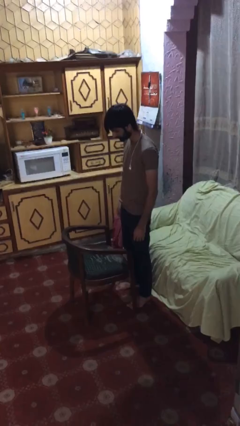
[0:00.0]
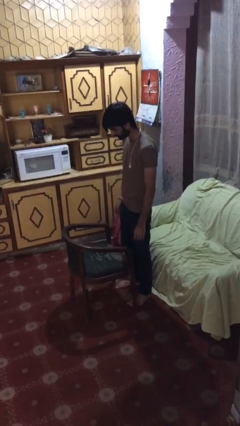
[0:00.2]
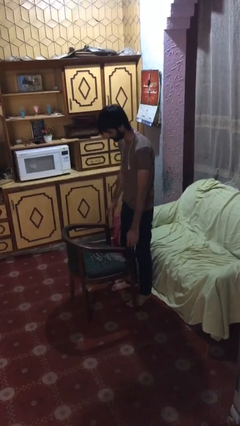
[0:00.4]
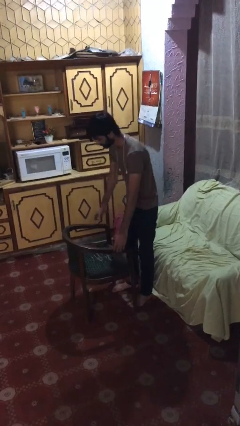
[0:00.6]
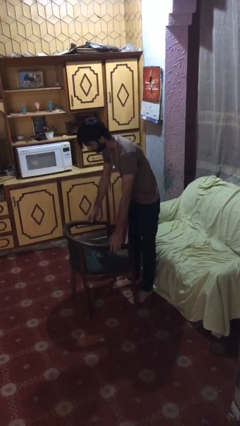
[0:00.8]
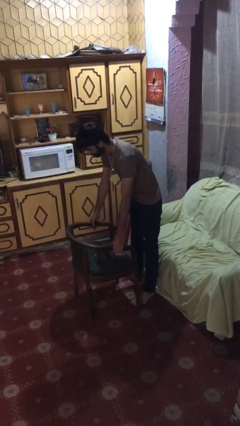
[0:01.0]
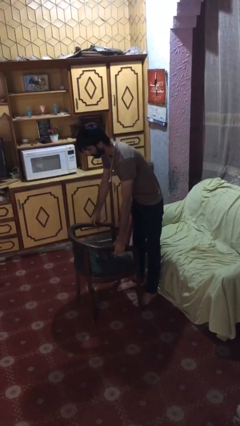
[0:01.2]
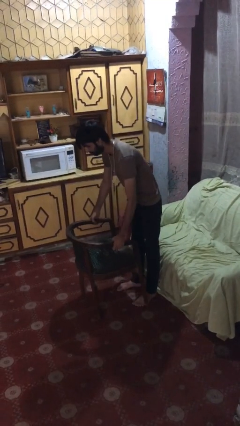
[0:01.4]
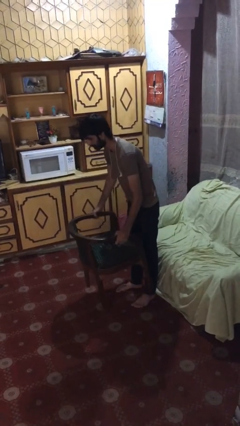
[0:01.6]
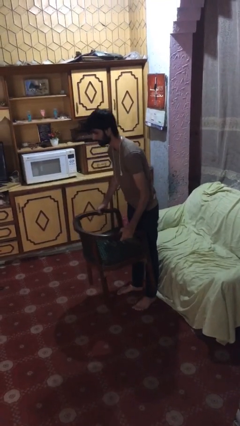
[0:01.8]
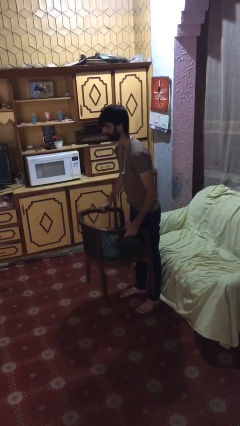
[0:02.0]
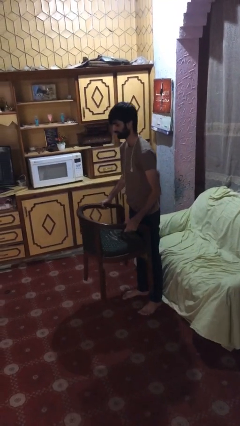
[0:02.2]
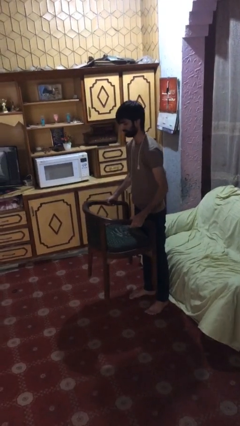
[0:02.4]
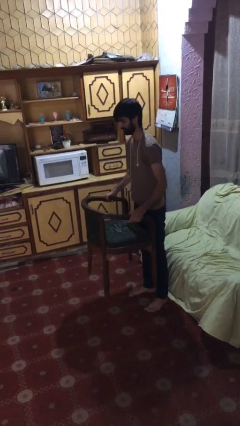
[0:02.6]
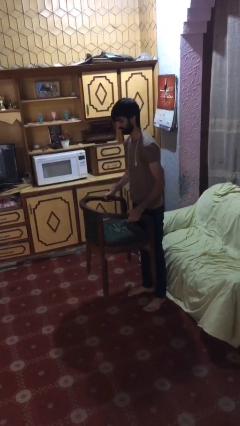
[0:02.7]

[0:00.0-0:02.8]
person picks up object from floor

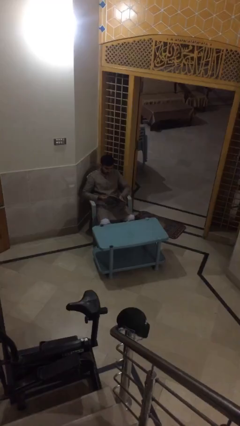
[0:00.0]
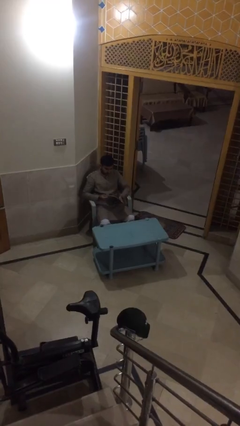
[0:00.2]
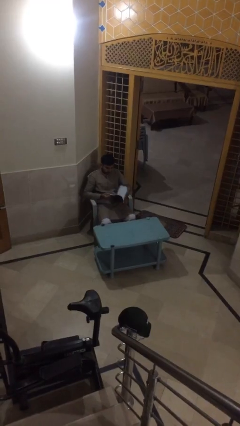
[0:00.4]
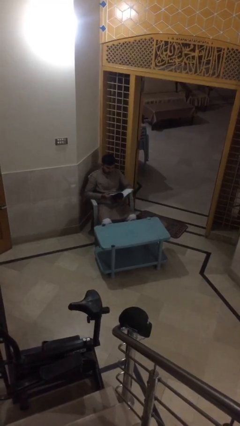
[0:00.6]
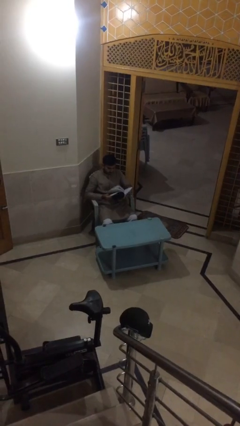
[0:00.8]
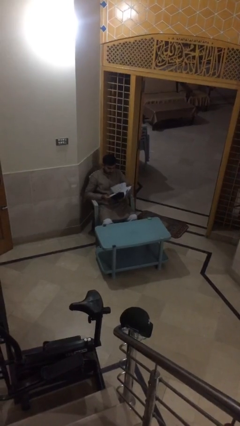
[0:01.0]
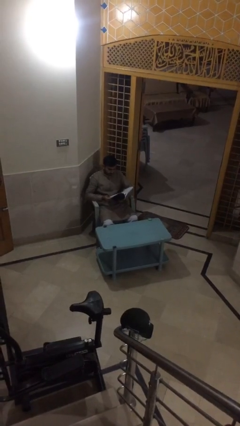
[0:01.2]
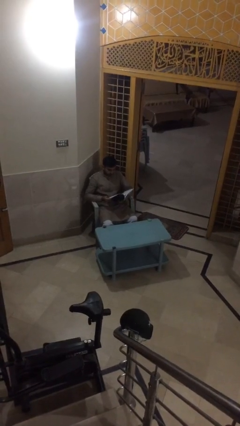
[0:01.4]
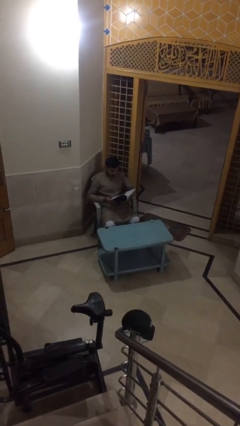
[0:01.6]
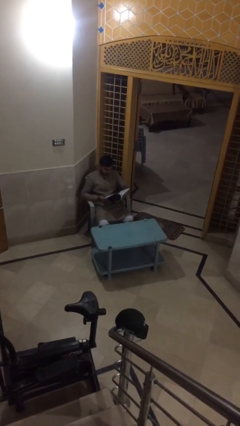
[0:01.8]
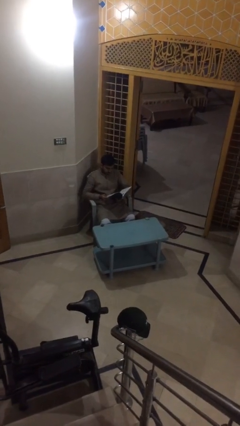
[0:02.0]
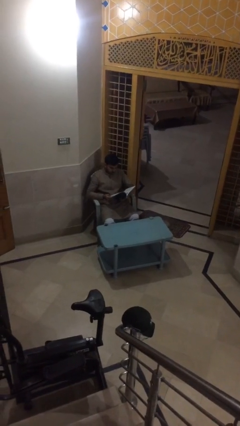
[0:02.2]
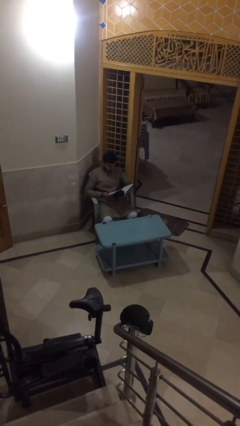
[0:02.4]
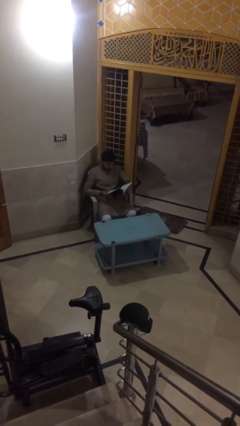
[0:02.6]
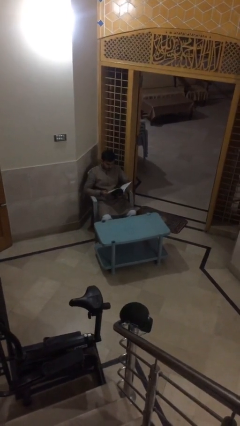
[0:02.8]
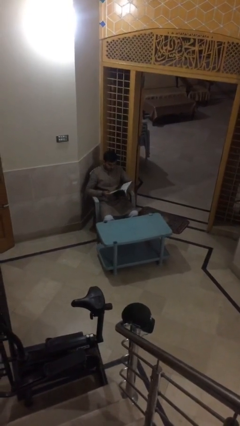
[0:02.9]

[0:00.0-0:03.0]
person reads document

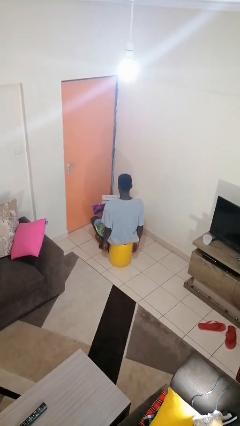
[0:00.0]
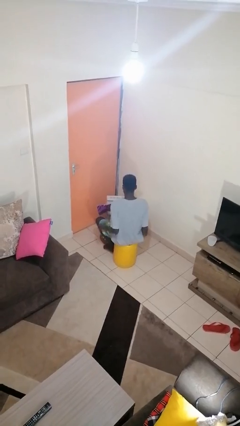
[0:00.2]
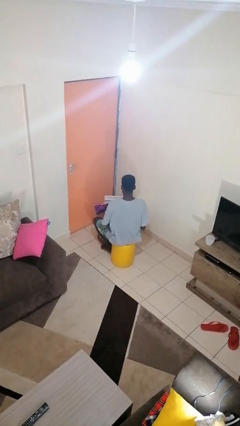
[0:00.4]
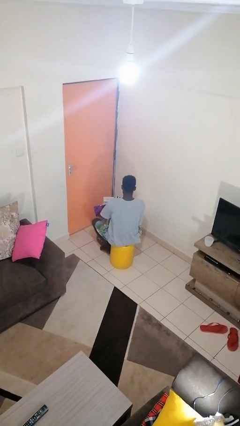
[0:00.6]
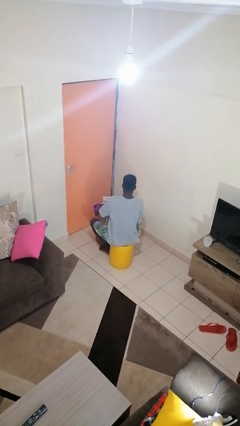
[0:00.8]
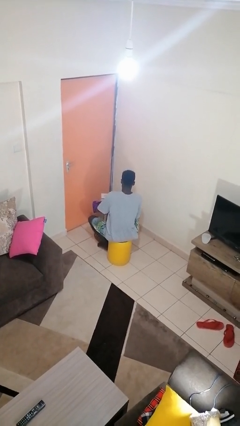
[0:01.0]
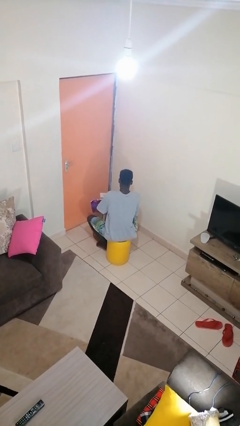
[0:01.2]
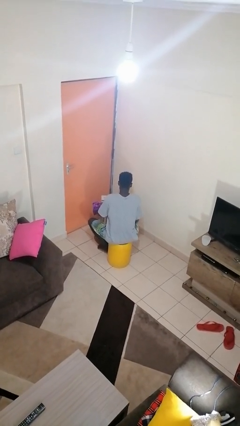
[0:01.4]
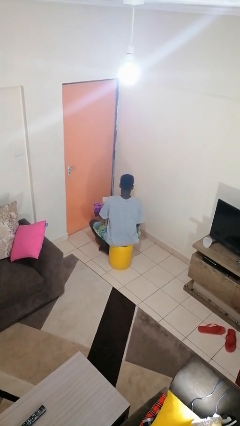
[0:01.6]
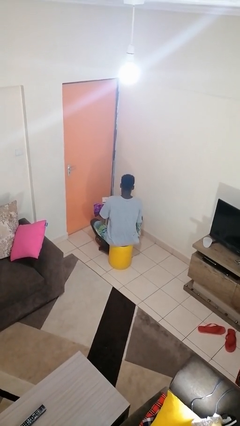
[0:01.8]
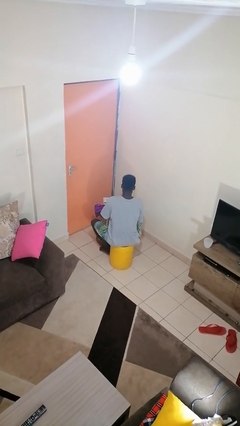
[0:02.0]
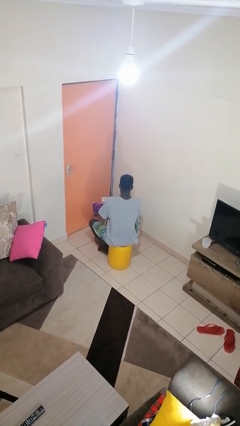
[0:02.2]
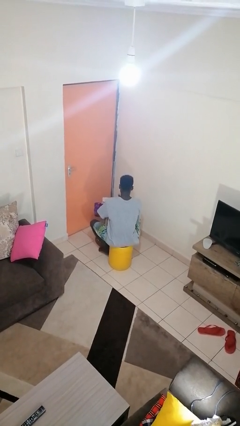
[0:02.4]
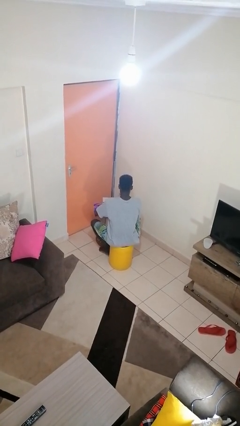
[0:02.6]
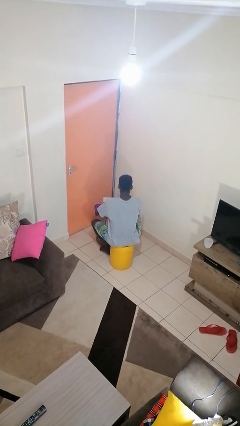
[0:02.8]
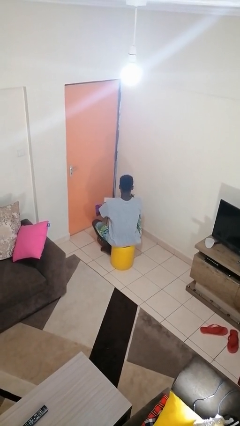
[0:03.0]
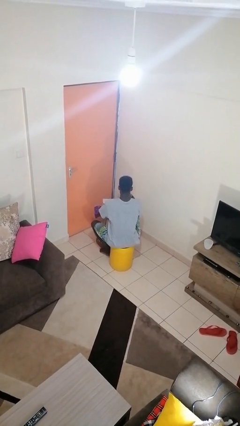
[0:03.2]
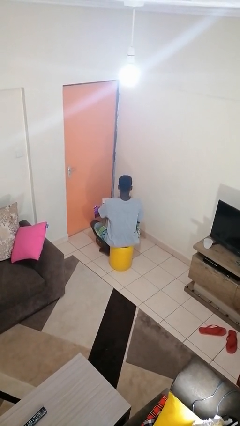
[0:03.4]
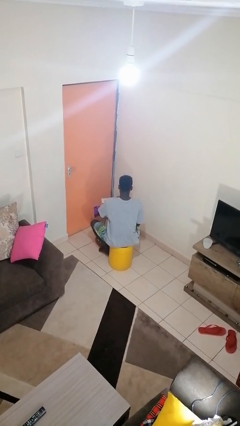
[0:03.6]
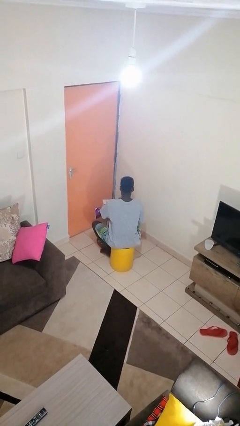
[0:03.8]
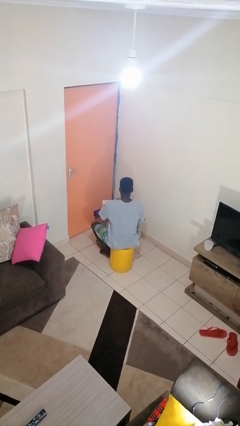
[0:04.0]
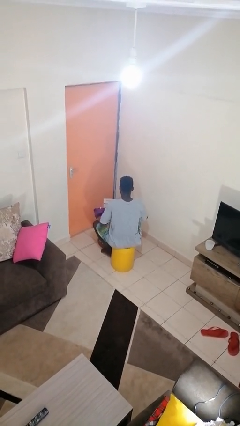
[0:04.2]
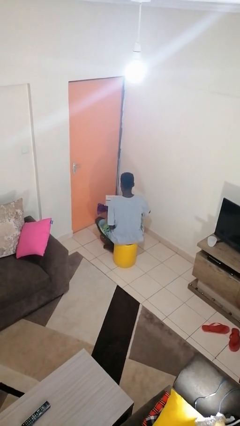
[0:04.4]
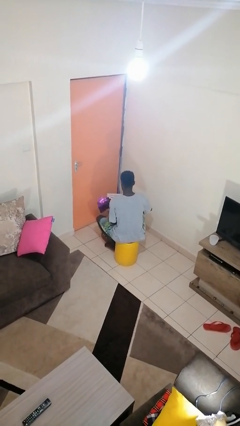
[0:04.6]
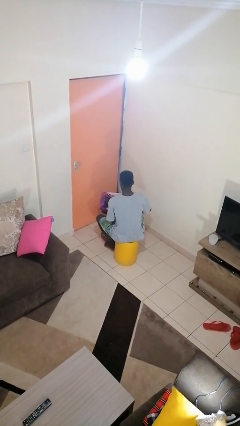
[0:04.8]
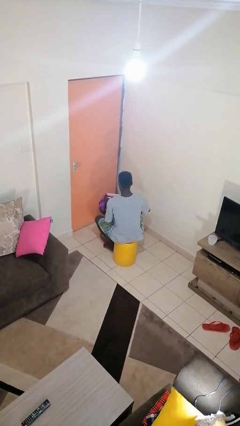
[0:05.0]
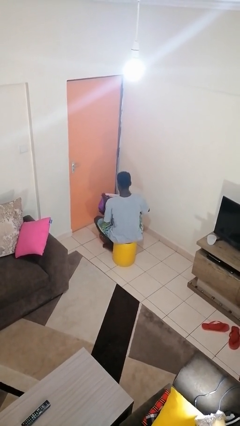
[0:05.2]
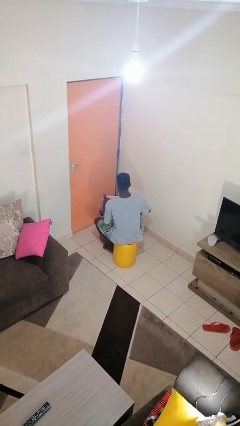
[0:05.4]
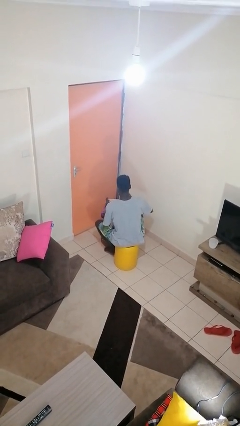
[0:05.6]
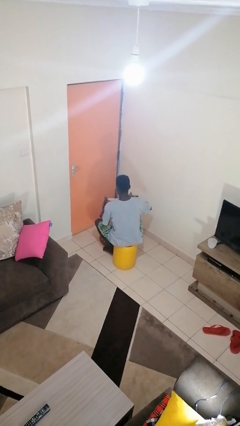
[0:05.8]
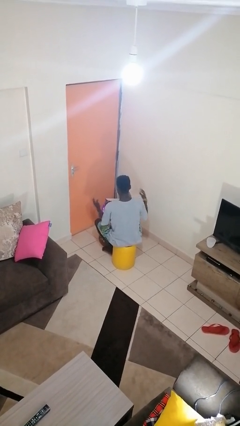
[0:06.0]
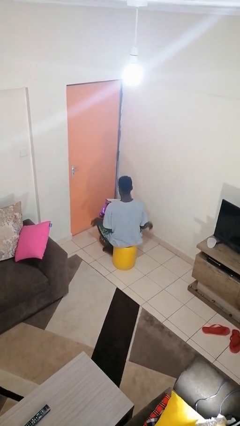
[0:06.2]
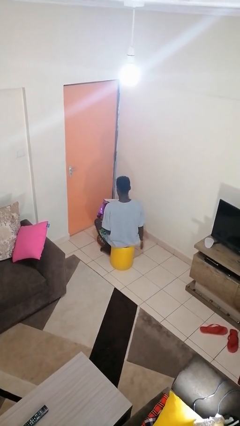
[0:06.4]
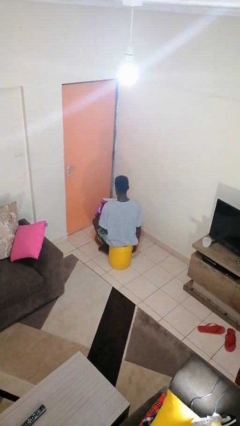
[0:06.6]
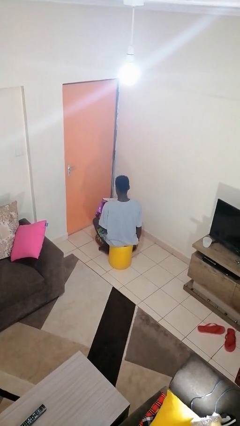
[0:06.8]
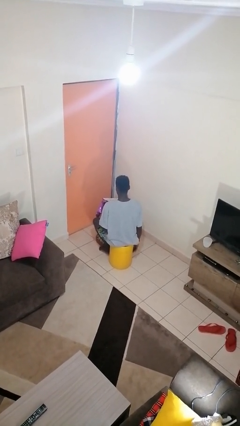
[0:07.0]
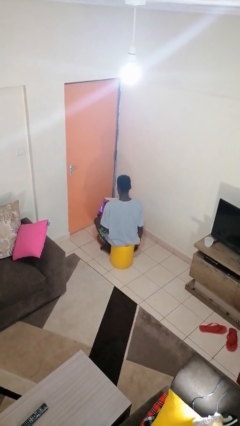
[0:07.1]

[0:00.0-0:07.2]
person wraps box

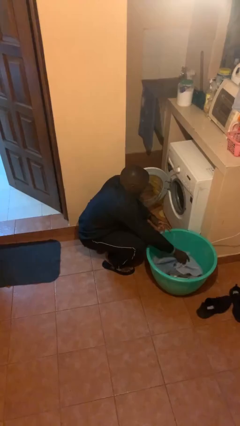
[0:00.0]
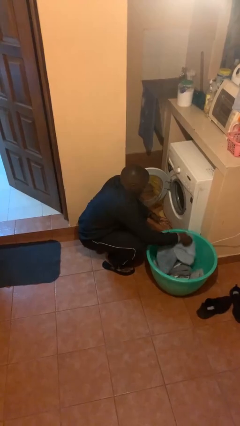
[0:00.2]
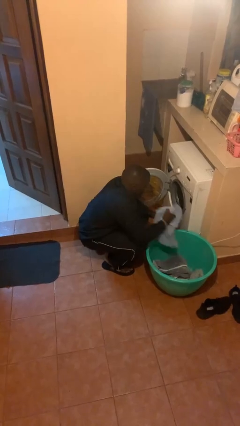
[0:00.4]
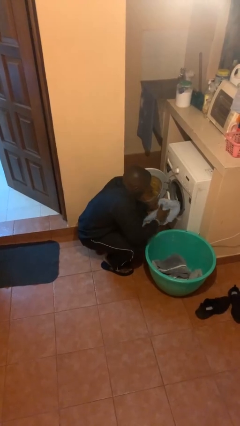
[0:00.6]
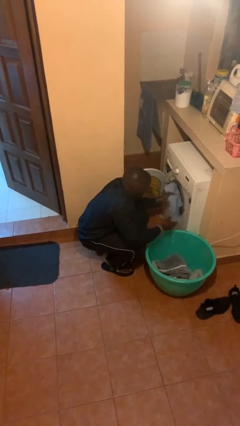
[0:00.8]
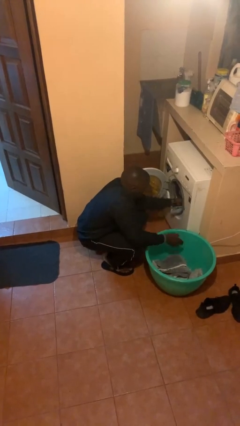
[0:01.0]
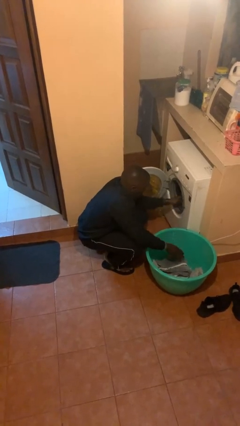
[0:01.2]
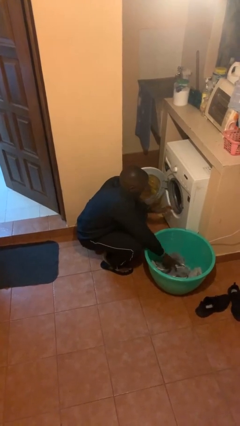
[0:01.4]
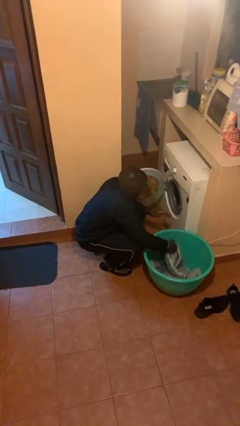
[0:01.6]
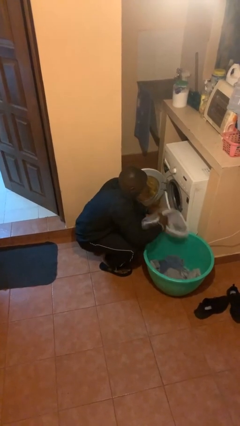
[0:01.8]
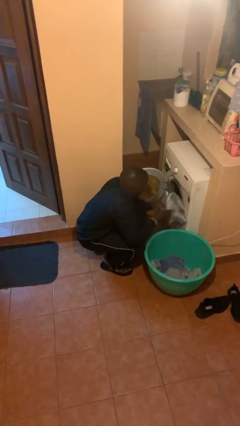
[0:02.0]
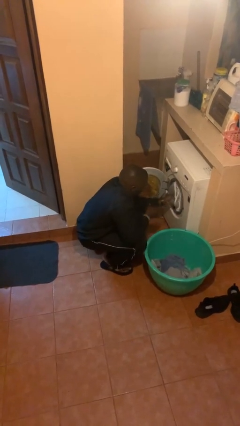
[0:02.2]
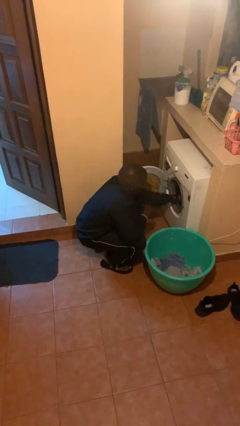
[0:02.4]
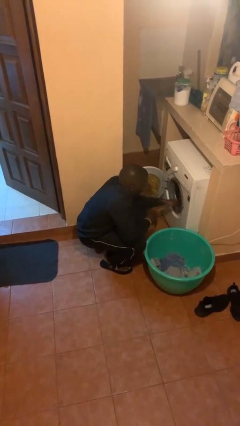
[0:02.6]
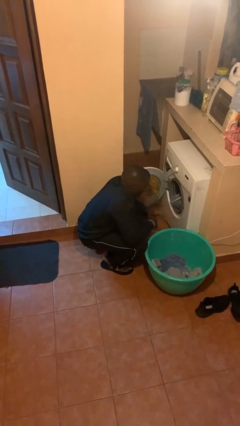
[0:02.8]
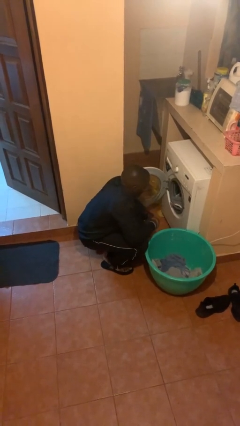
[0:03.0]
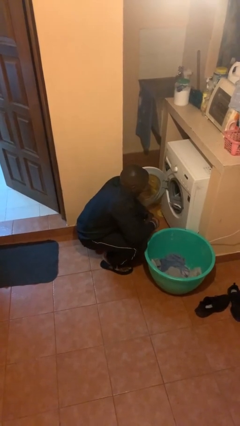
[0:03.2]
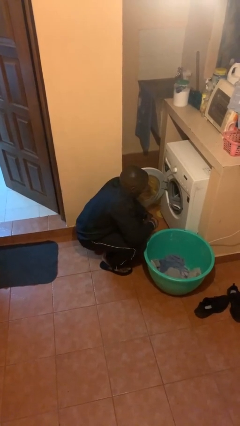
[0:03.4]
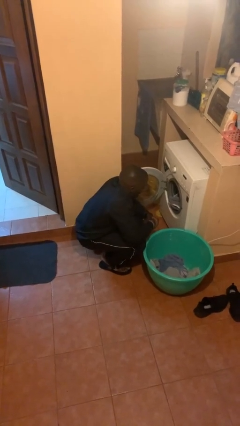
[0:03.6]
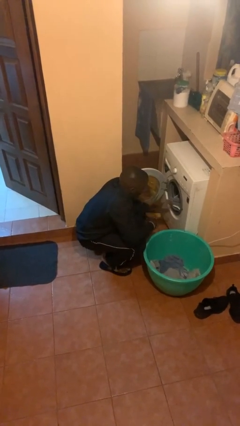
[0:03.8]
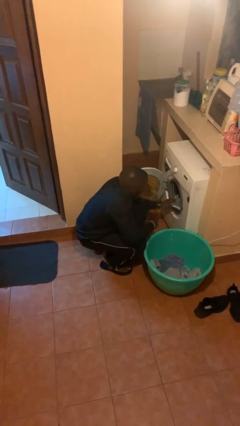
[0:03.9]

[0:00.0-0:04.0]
person loads clotheswasher

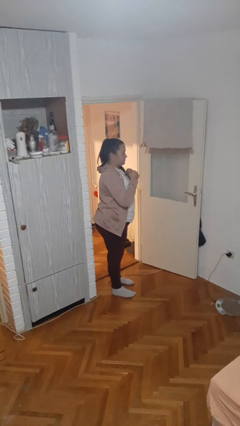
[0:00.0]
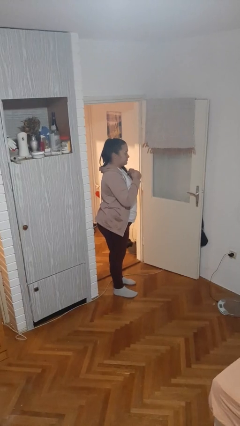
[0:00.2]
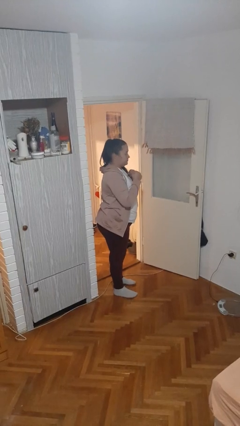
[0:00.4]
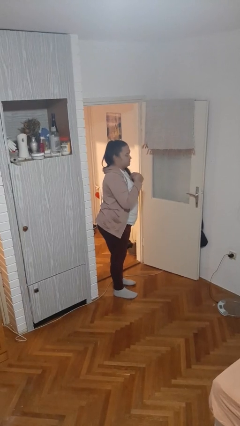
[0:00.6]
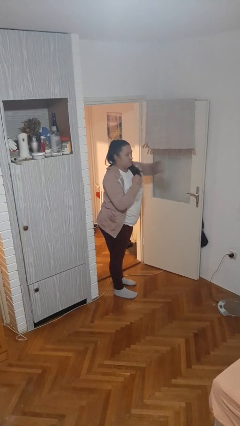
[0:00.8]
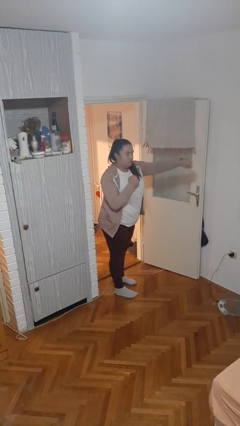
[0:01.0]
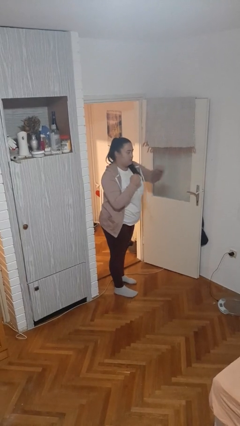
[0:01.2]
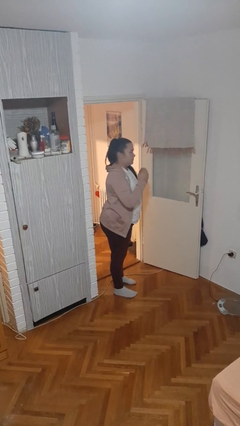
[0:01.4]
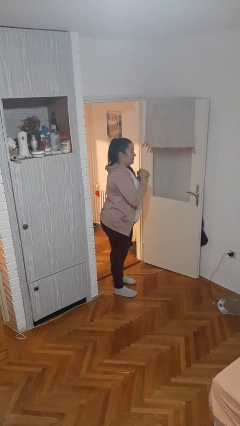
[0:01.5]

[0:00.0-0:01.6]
person punches
